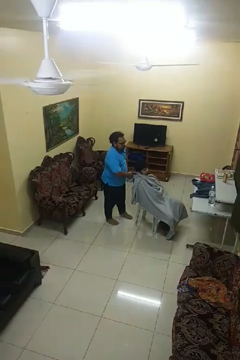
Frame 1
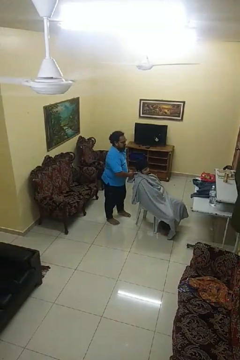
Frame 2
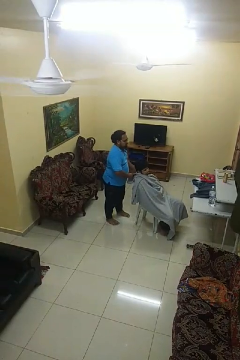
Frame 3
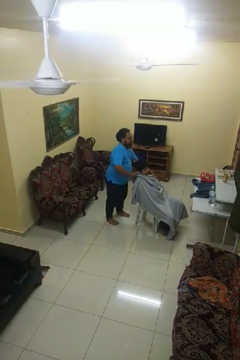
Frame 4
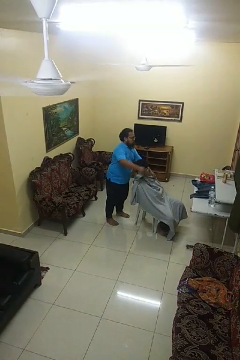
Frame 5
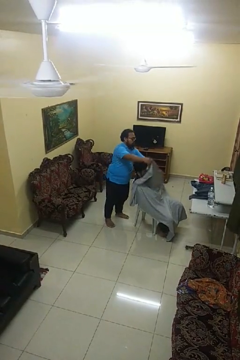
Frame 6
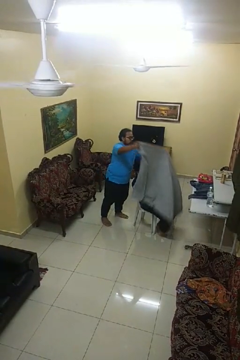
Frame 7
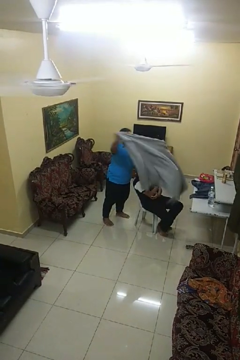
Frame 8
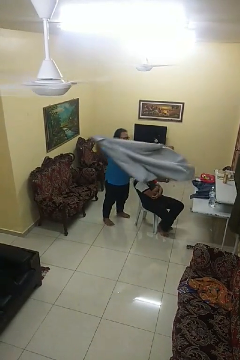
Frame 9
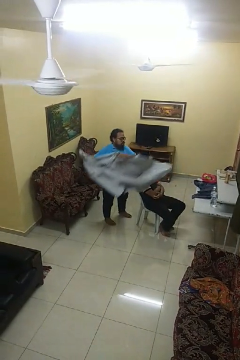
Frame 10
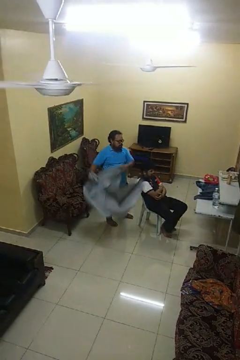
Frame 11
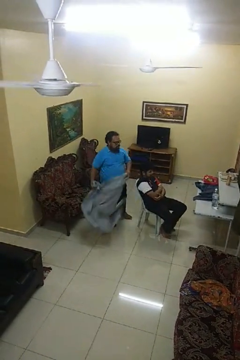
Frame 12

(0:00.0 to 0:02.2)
person uncovers friend with blanket

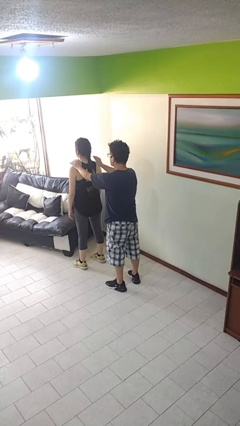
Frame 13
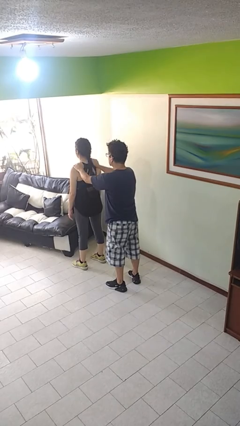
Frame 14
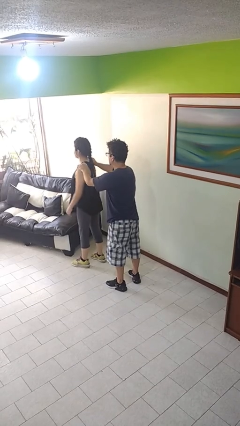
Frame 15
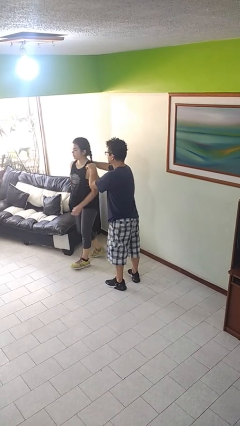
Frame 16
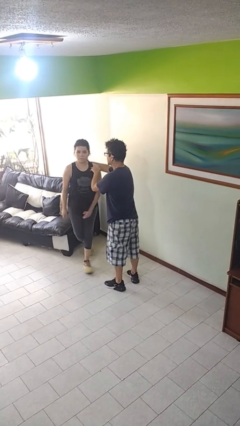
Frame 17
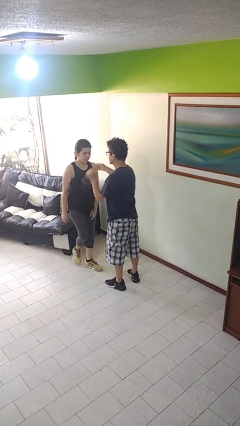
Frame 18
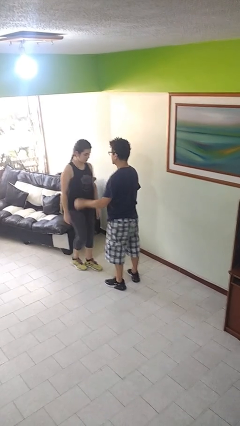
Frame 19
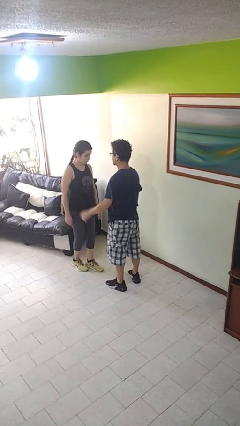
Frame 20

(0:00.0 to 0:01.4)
person spins person around

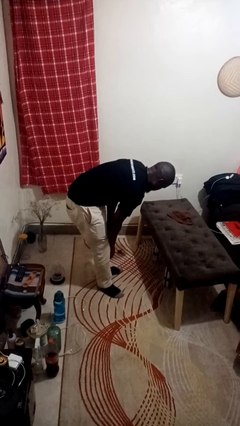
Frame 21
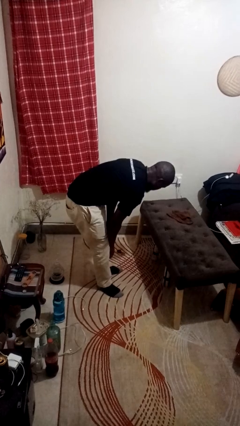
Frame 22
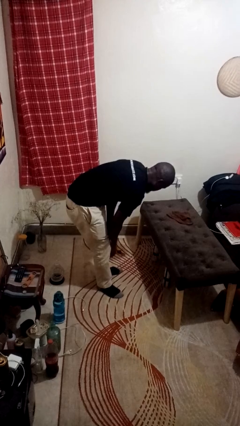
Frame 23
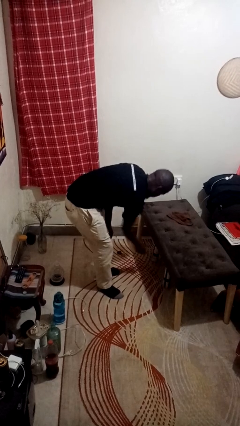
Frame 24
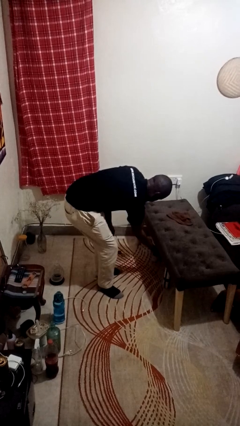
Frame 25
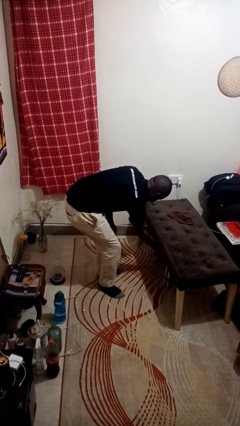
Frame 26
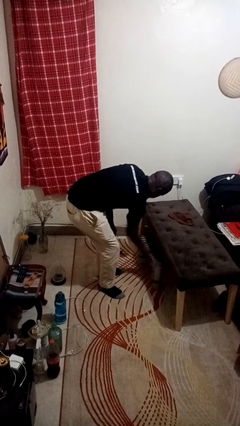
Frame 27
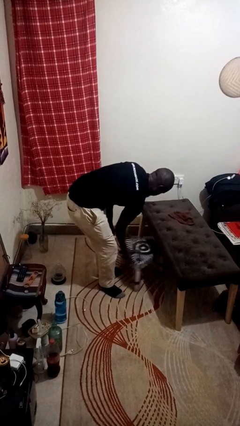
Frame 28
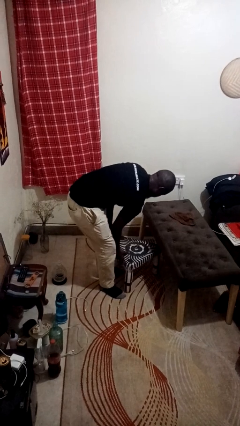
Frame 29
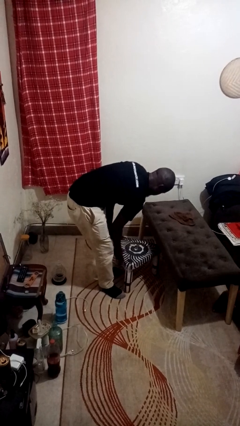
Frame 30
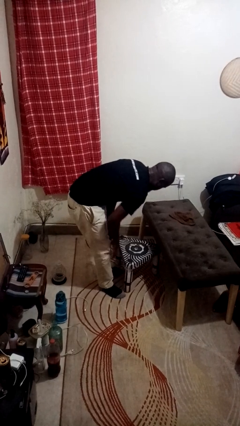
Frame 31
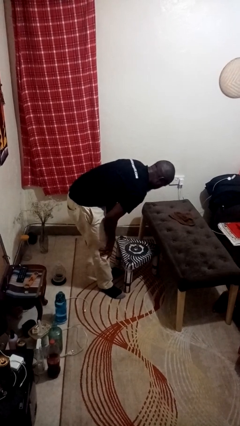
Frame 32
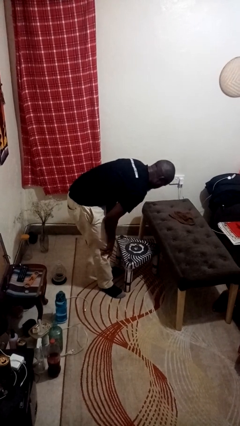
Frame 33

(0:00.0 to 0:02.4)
person pulls out chair

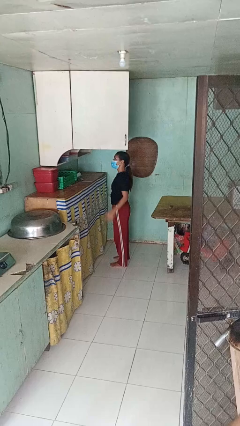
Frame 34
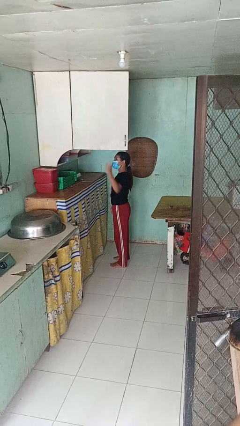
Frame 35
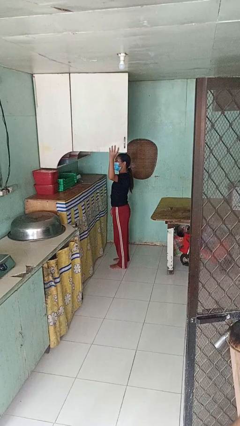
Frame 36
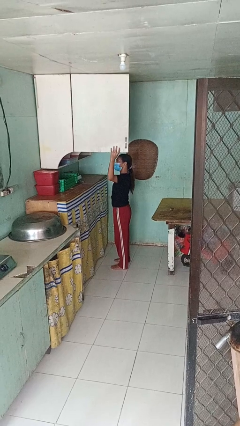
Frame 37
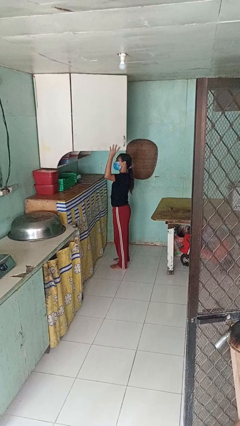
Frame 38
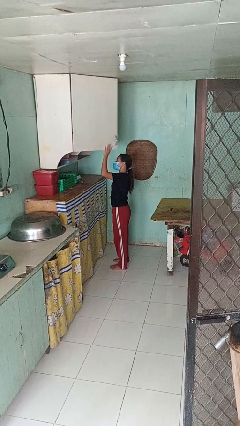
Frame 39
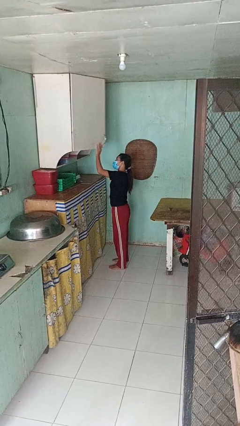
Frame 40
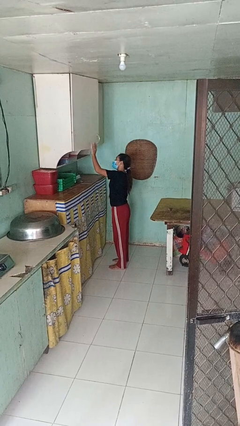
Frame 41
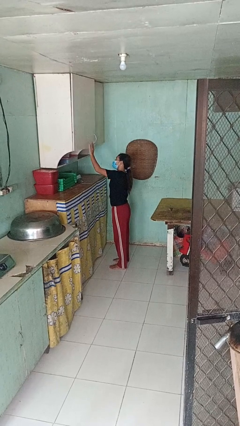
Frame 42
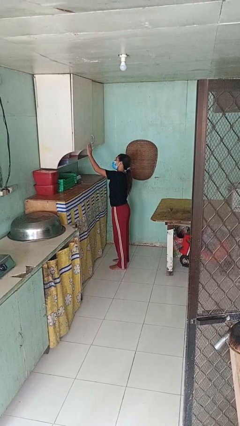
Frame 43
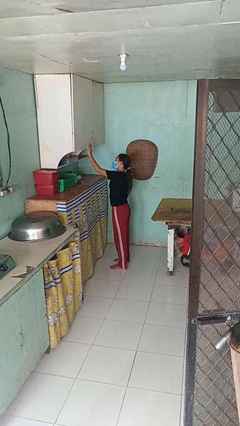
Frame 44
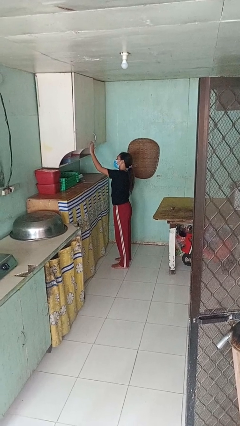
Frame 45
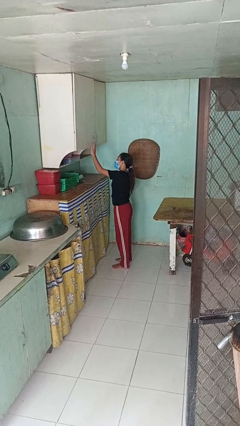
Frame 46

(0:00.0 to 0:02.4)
person closes cabinet

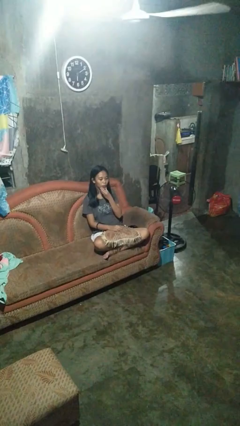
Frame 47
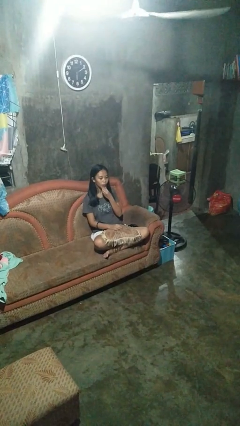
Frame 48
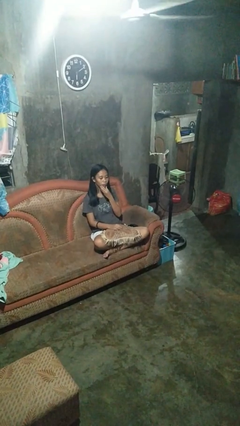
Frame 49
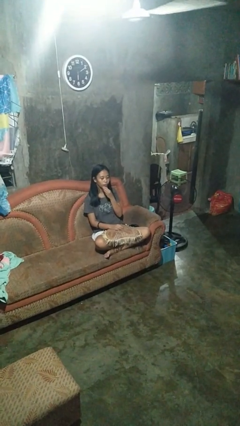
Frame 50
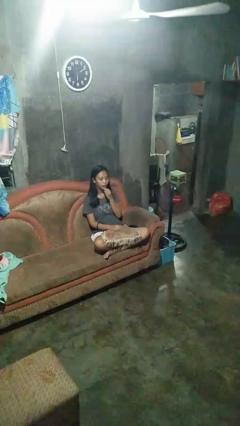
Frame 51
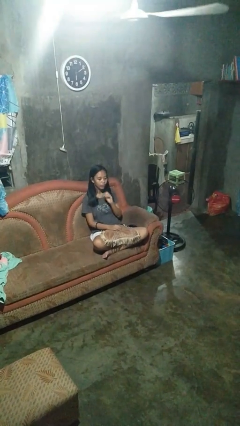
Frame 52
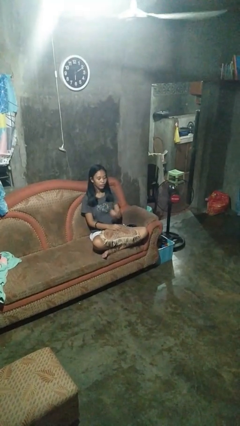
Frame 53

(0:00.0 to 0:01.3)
person strokes chin

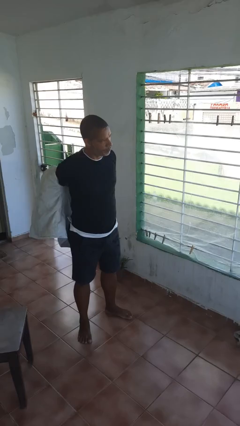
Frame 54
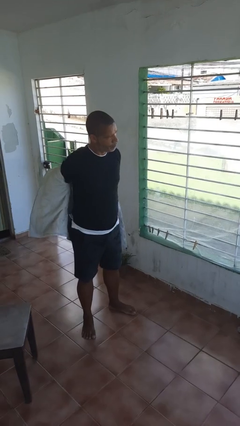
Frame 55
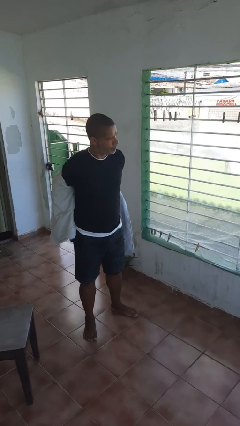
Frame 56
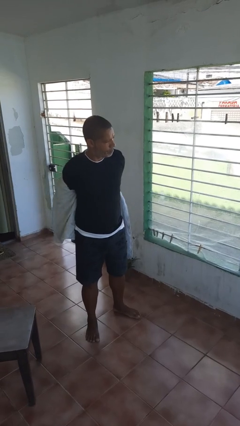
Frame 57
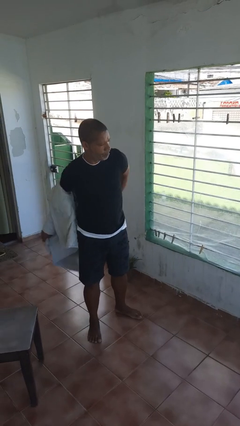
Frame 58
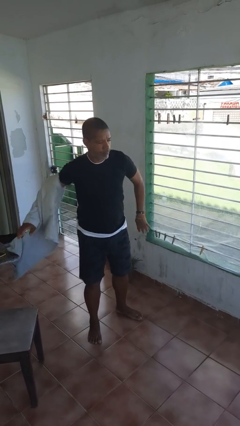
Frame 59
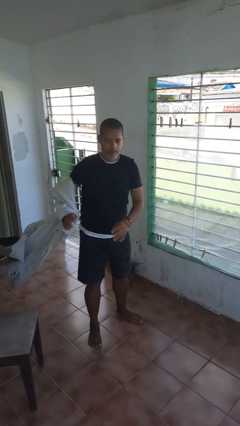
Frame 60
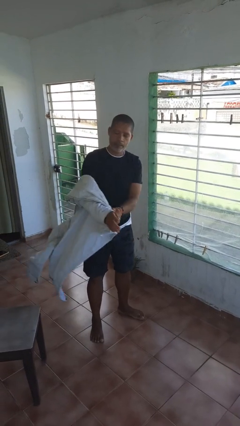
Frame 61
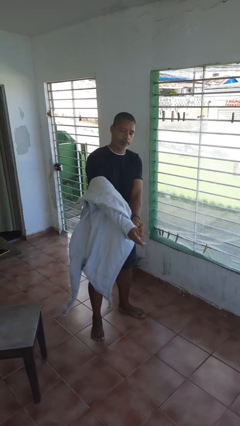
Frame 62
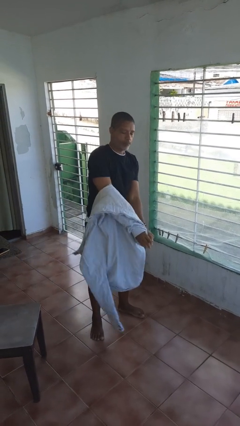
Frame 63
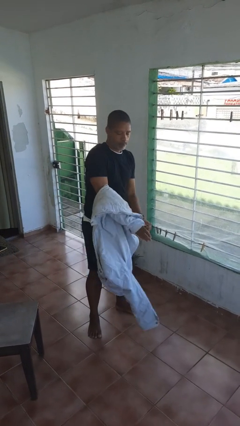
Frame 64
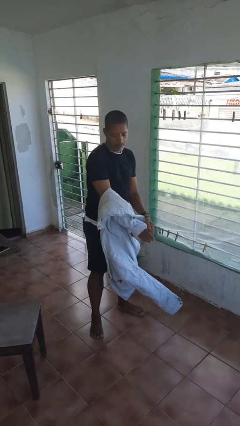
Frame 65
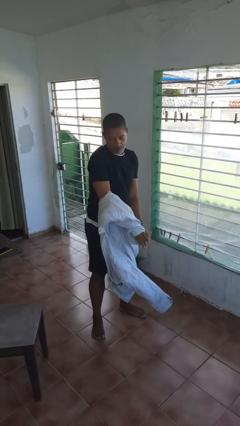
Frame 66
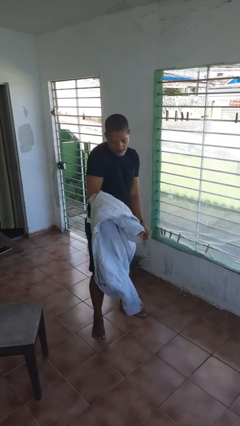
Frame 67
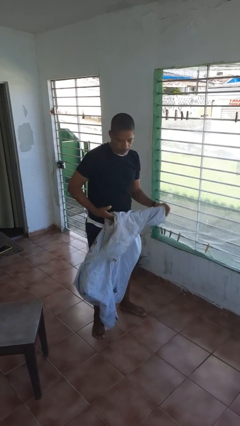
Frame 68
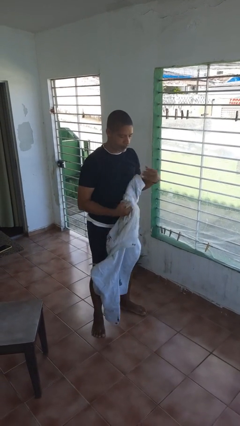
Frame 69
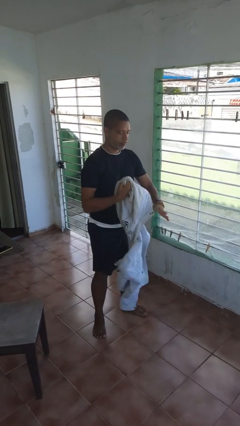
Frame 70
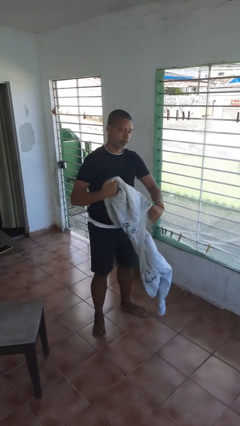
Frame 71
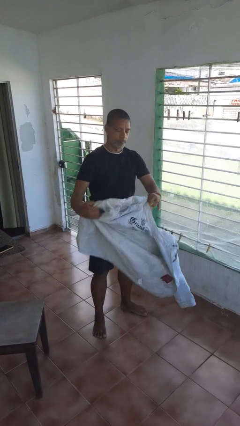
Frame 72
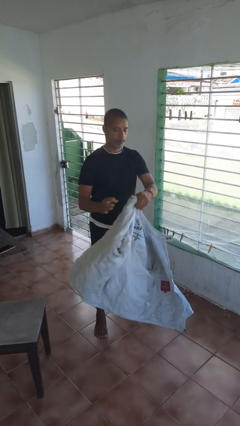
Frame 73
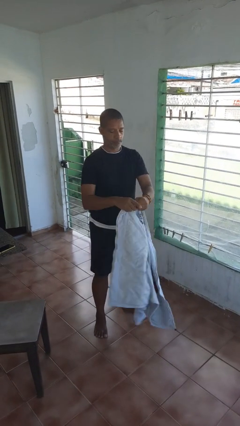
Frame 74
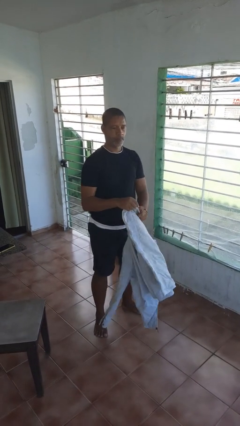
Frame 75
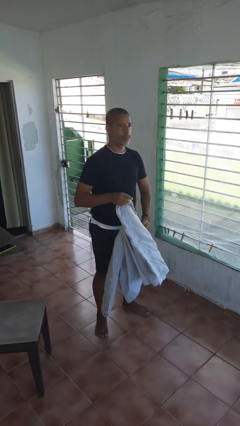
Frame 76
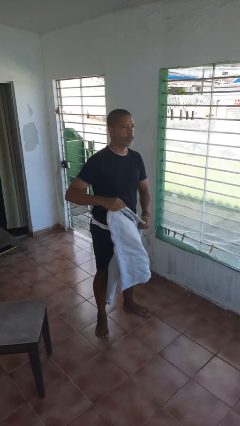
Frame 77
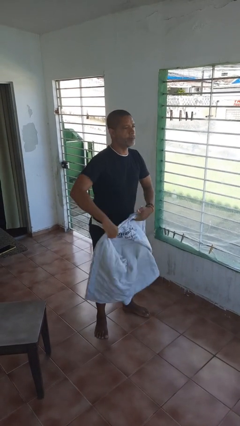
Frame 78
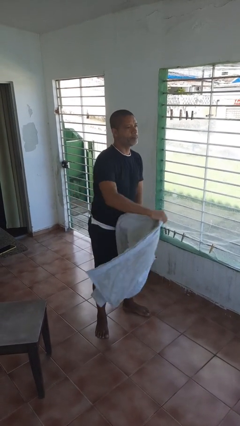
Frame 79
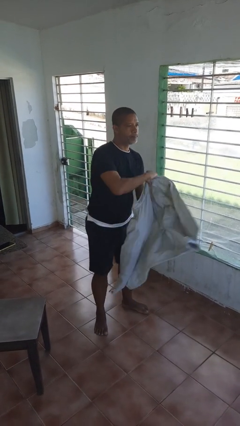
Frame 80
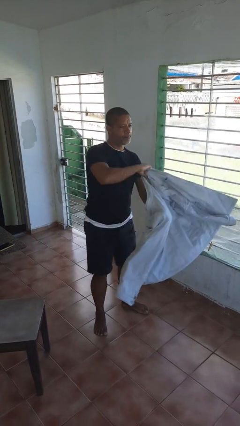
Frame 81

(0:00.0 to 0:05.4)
person takes off jacket

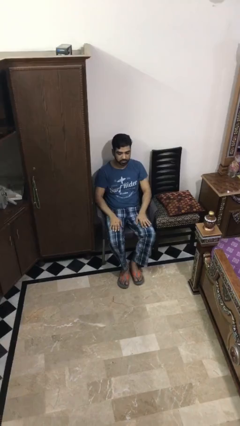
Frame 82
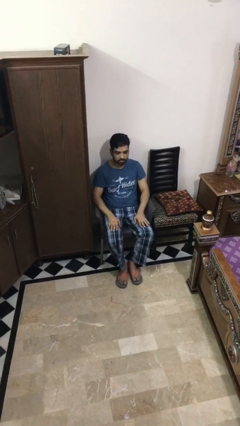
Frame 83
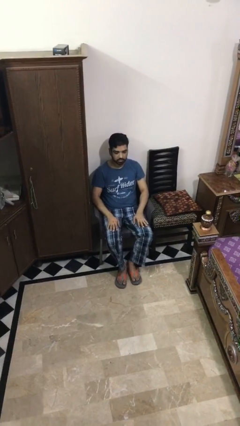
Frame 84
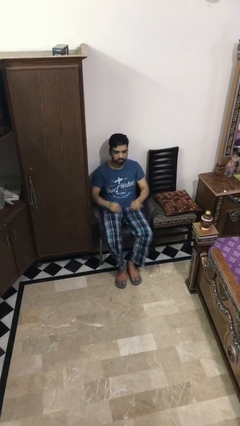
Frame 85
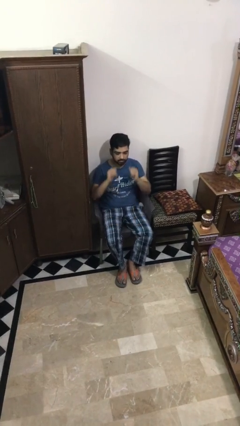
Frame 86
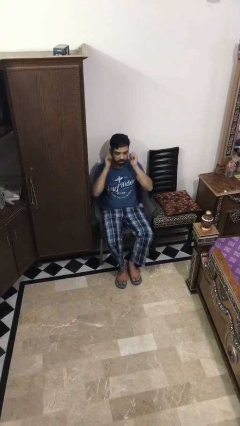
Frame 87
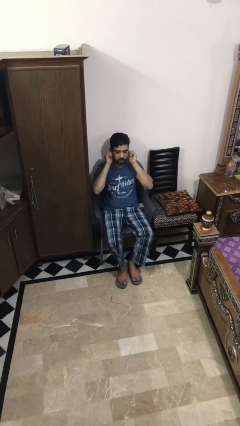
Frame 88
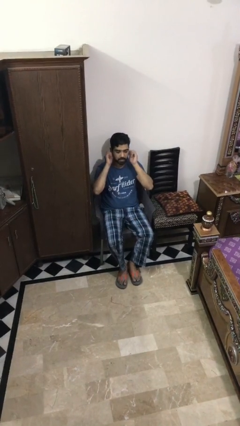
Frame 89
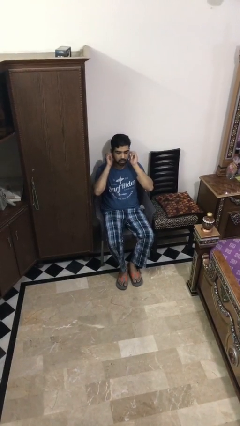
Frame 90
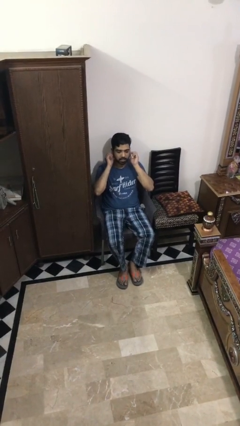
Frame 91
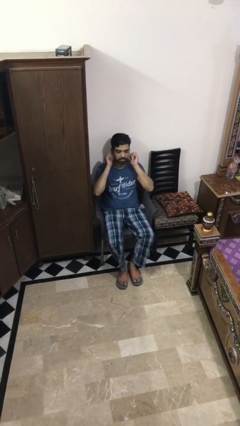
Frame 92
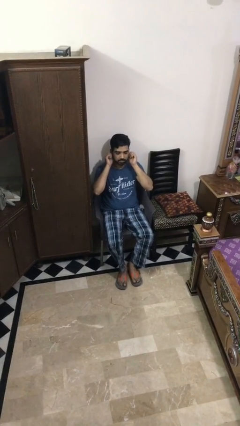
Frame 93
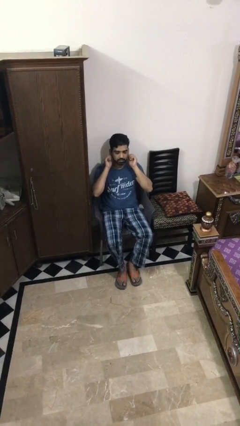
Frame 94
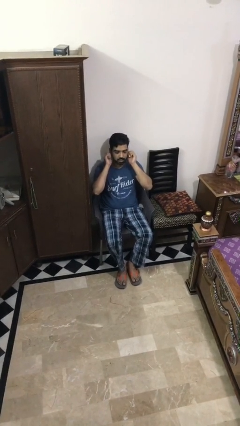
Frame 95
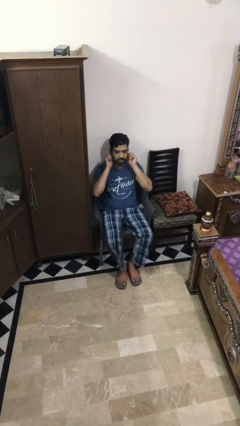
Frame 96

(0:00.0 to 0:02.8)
person touches earlobe
